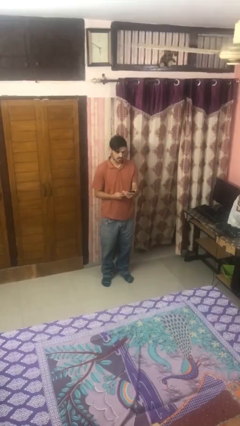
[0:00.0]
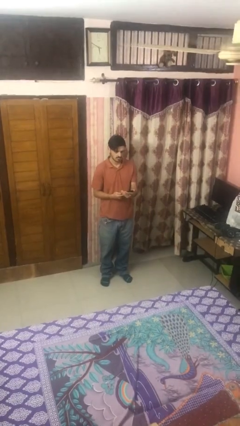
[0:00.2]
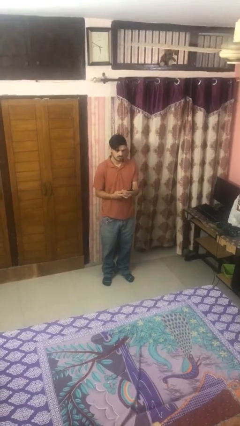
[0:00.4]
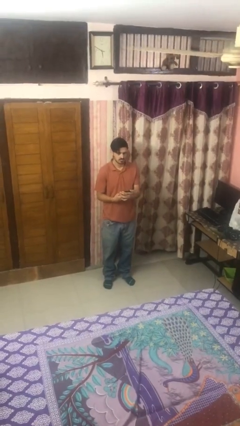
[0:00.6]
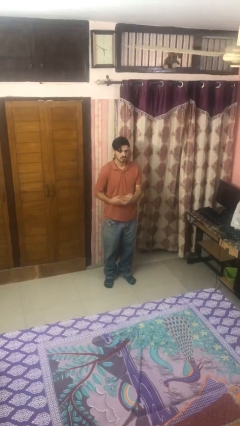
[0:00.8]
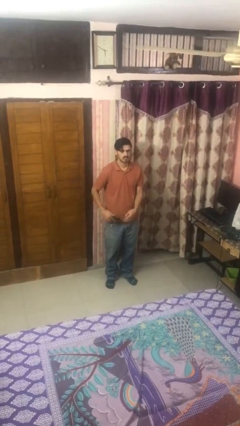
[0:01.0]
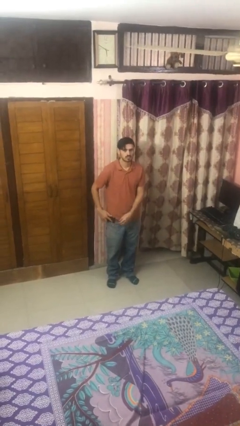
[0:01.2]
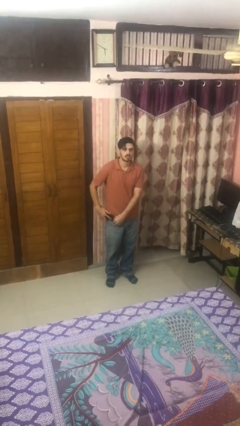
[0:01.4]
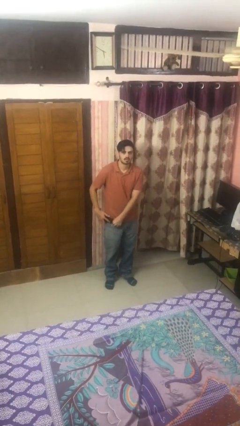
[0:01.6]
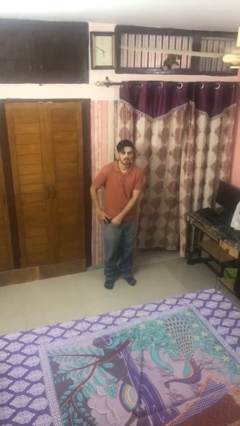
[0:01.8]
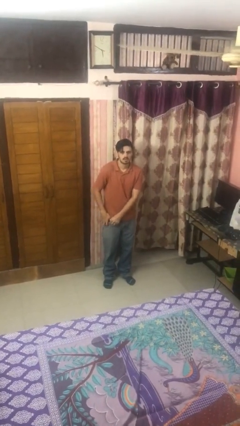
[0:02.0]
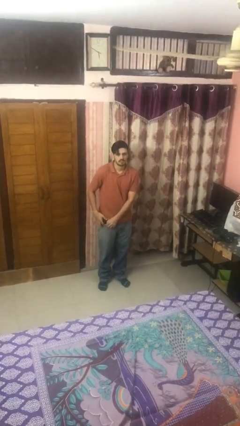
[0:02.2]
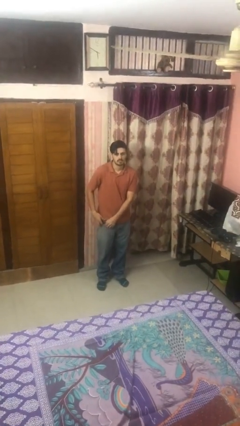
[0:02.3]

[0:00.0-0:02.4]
person puts phone into pocket

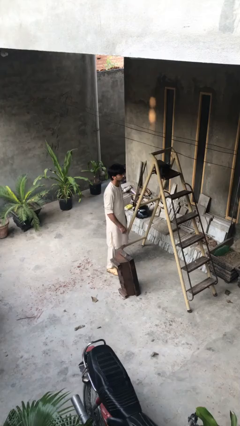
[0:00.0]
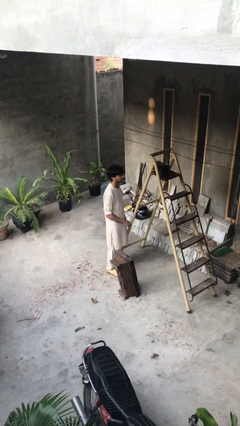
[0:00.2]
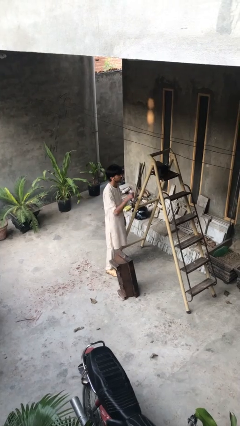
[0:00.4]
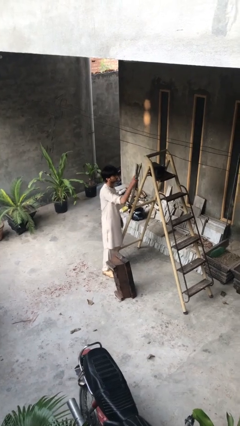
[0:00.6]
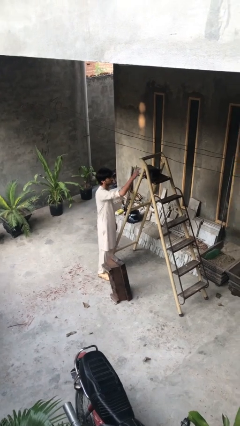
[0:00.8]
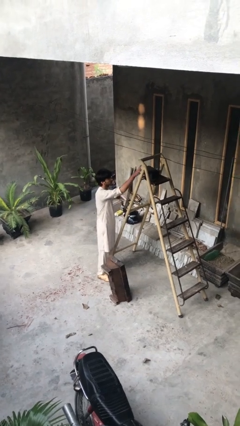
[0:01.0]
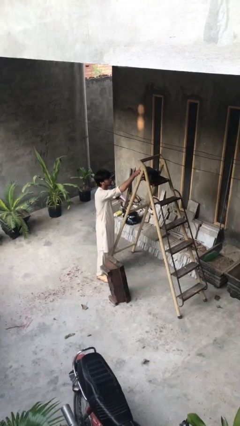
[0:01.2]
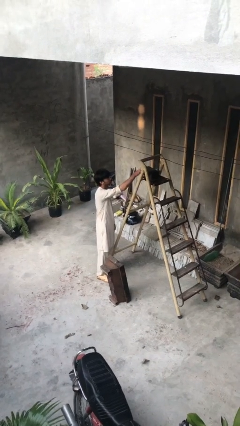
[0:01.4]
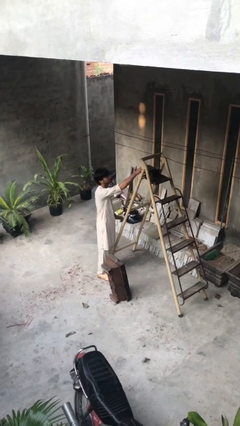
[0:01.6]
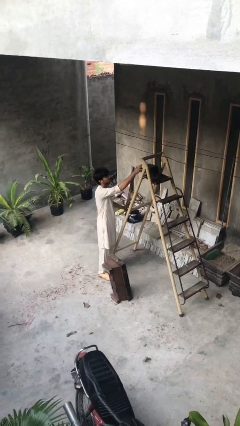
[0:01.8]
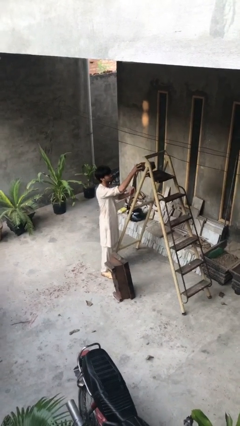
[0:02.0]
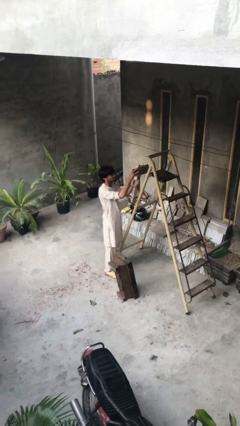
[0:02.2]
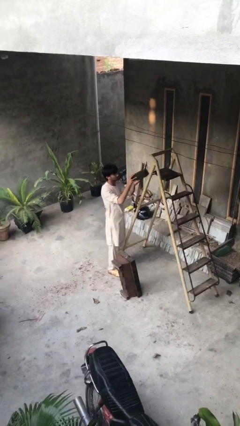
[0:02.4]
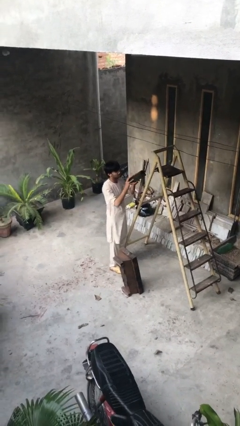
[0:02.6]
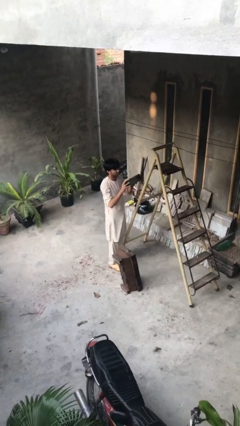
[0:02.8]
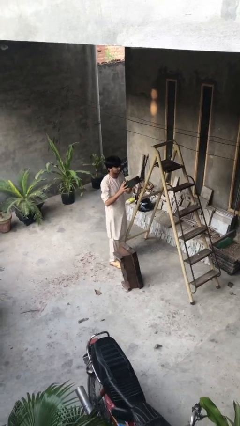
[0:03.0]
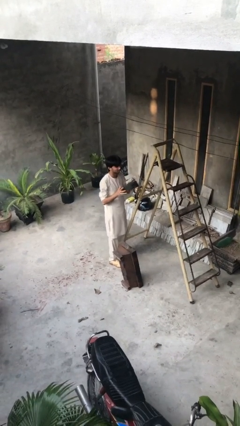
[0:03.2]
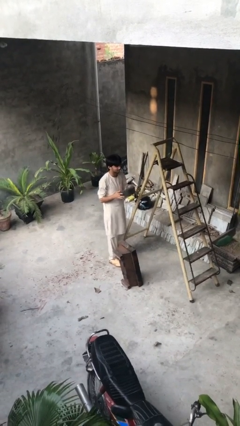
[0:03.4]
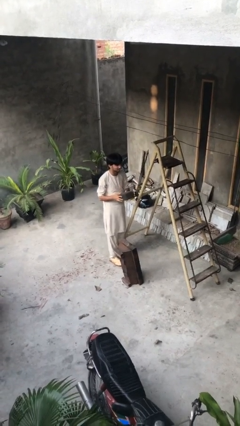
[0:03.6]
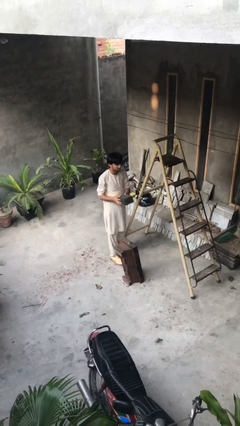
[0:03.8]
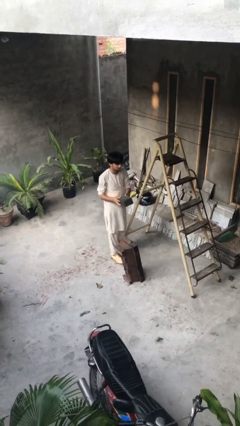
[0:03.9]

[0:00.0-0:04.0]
person picks up object from shelf

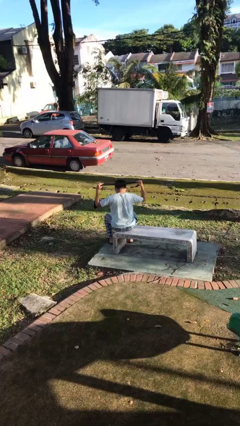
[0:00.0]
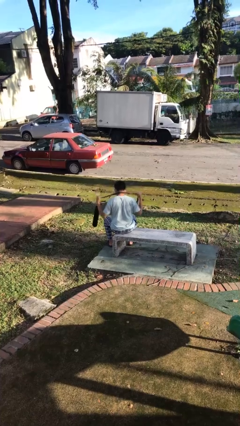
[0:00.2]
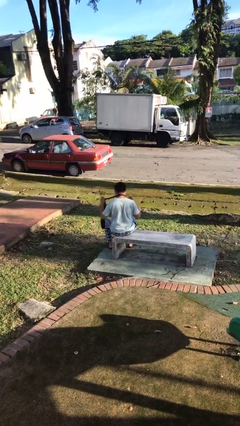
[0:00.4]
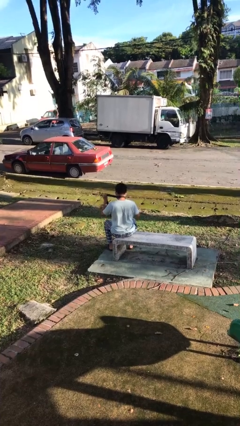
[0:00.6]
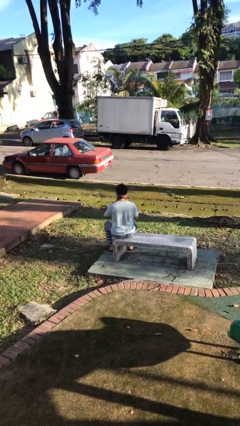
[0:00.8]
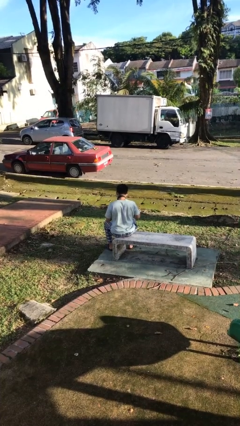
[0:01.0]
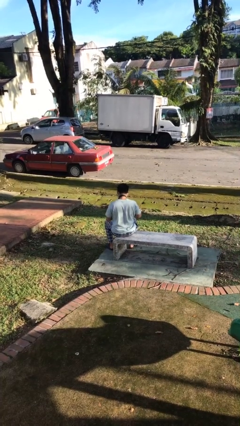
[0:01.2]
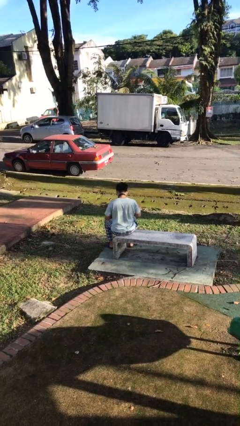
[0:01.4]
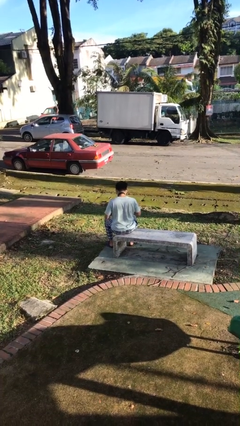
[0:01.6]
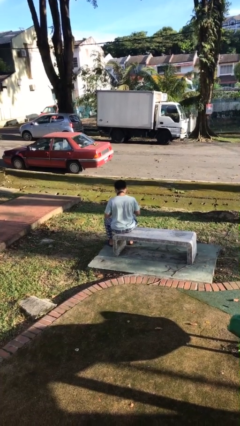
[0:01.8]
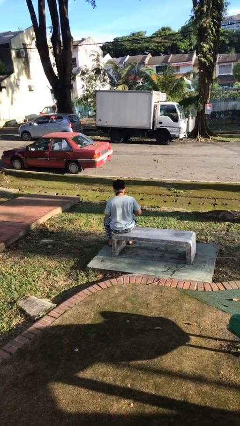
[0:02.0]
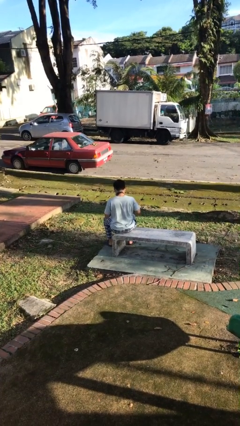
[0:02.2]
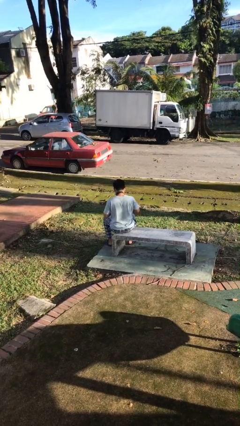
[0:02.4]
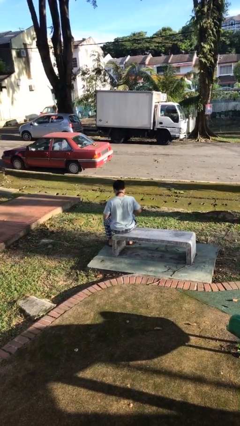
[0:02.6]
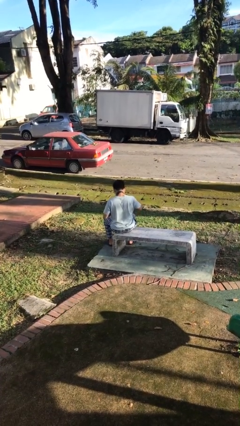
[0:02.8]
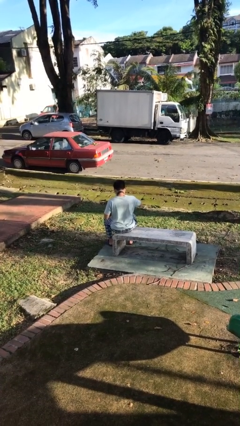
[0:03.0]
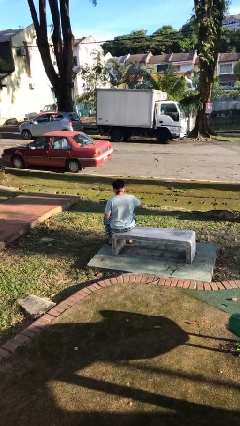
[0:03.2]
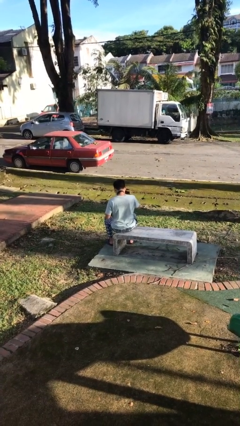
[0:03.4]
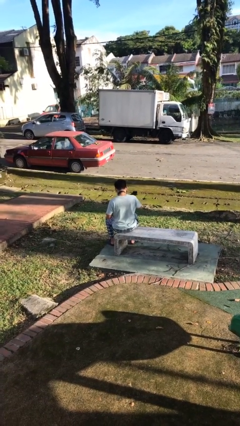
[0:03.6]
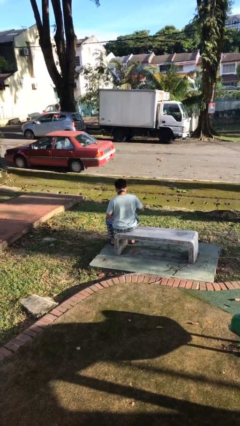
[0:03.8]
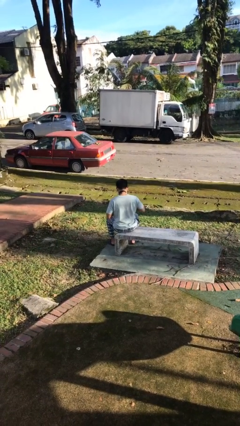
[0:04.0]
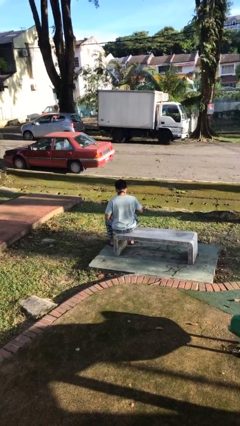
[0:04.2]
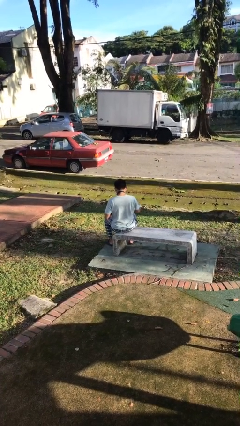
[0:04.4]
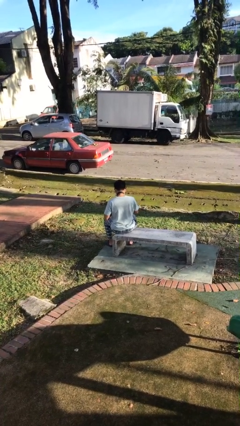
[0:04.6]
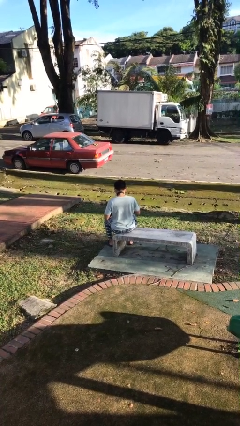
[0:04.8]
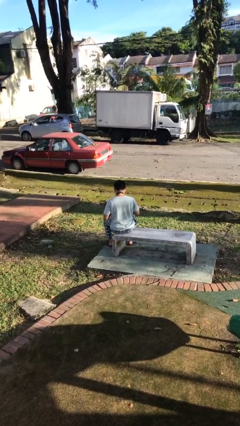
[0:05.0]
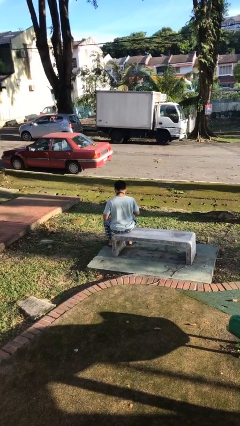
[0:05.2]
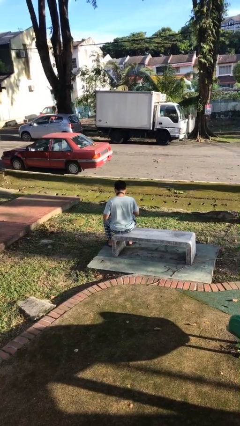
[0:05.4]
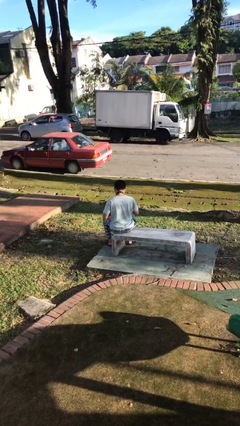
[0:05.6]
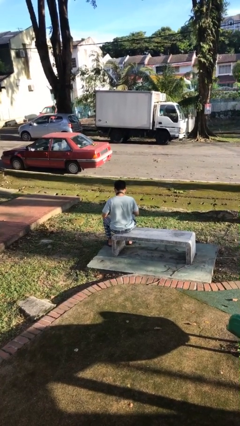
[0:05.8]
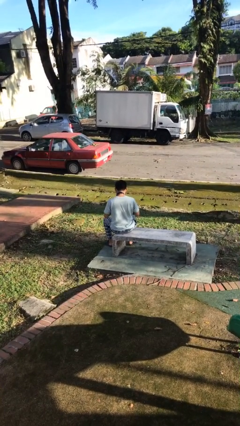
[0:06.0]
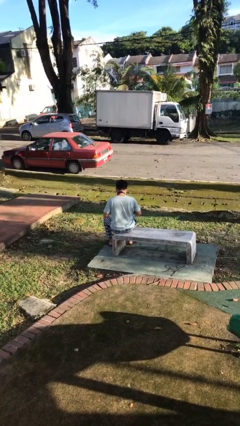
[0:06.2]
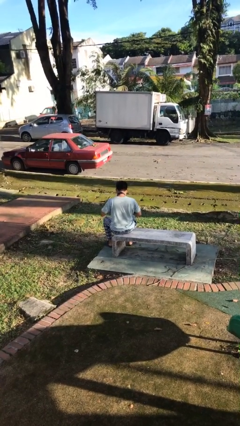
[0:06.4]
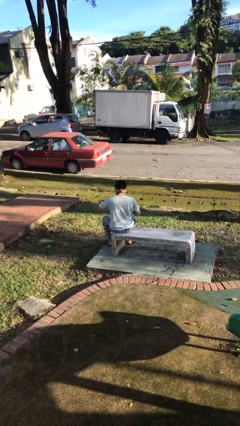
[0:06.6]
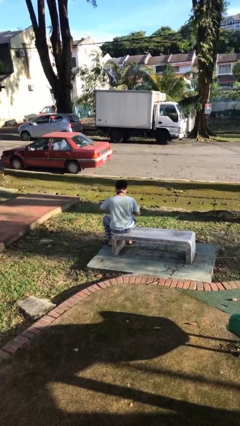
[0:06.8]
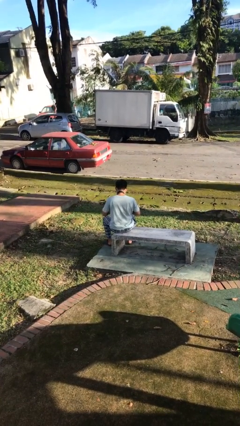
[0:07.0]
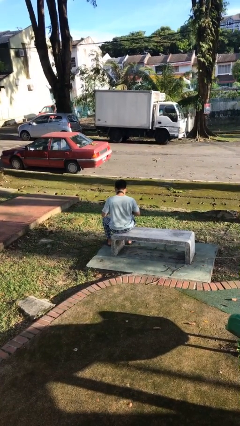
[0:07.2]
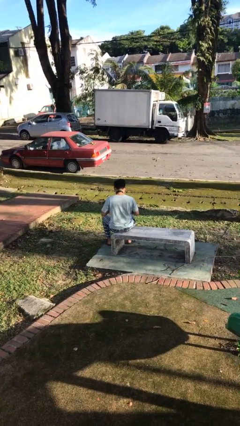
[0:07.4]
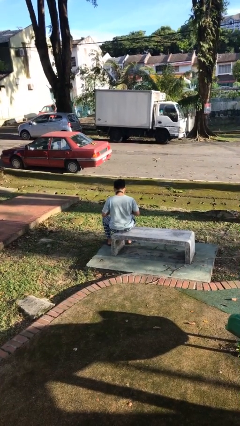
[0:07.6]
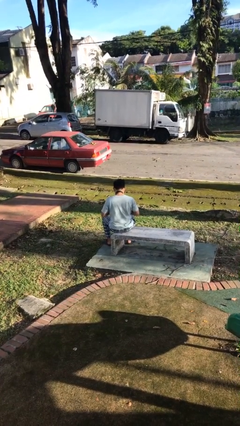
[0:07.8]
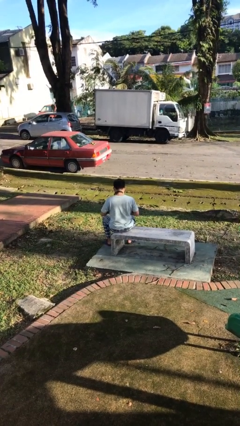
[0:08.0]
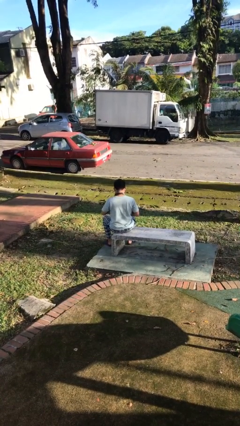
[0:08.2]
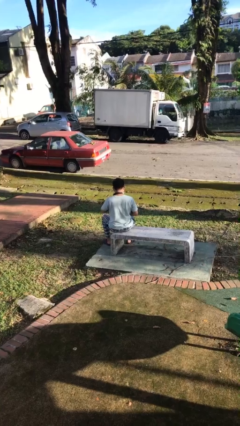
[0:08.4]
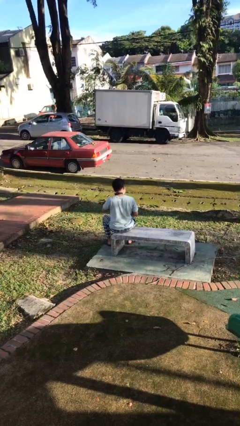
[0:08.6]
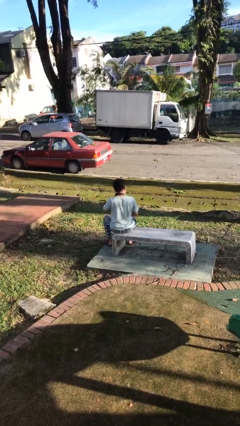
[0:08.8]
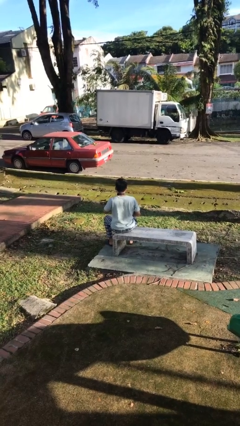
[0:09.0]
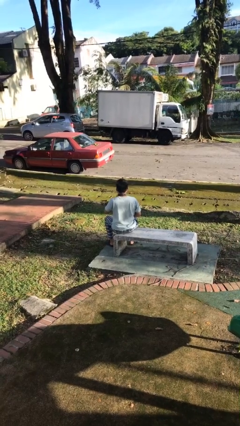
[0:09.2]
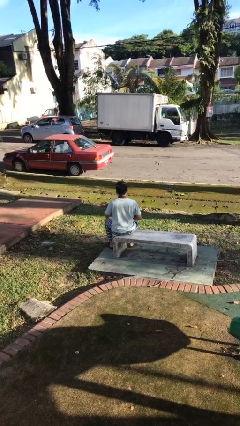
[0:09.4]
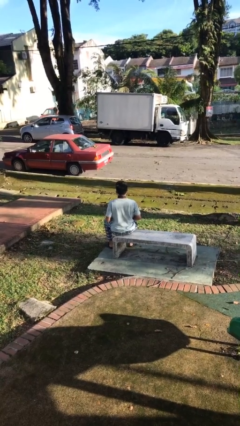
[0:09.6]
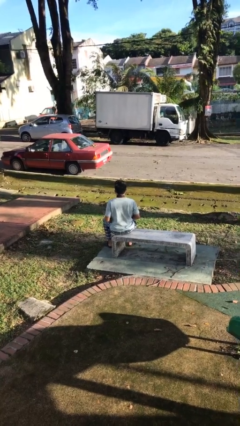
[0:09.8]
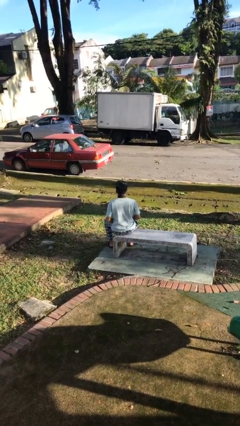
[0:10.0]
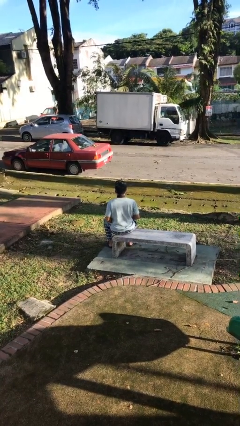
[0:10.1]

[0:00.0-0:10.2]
person puts on necktie

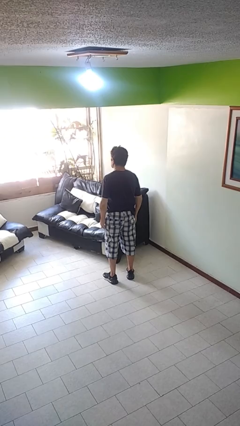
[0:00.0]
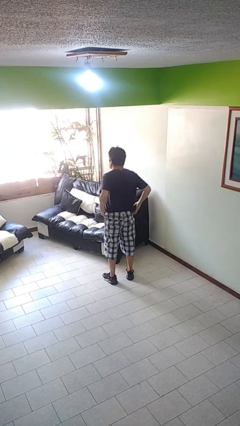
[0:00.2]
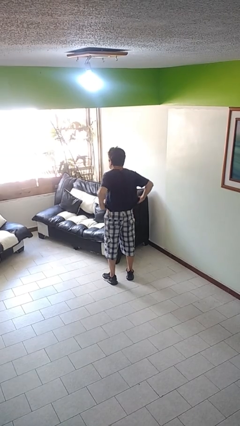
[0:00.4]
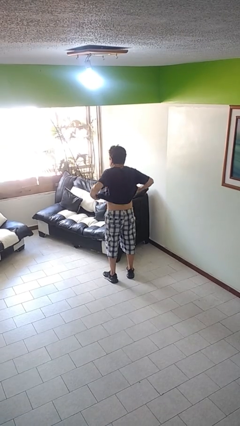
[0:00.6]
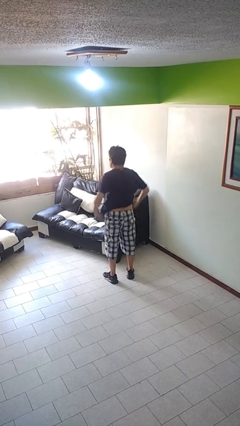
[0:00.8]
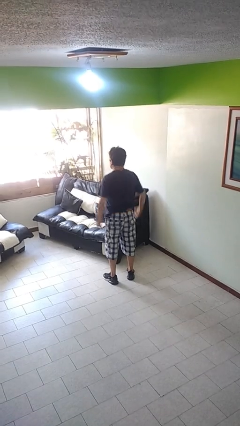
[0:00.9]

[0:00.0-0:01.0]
person untucks shirt
